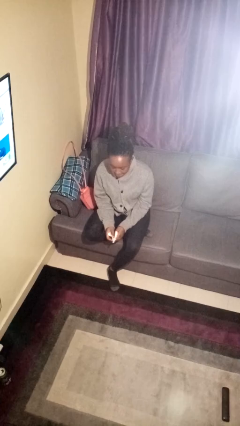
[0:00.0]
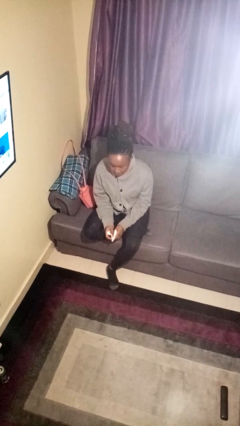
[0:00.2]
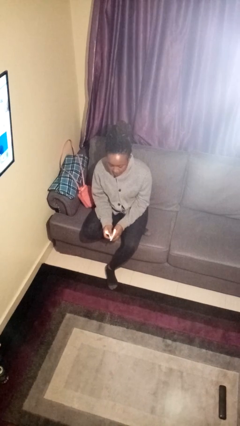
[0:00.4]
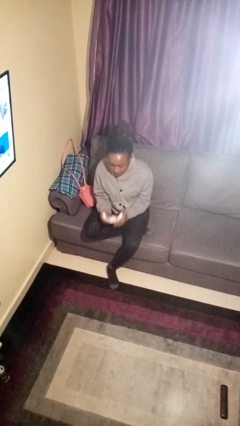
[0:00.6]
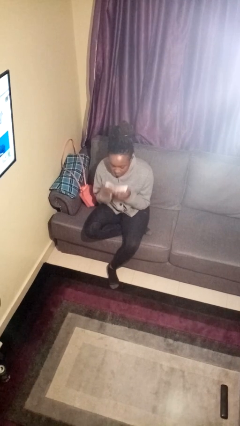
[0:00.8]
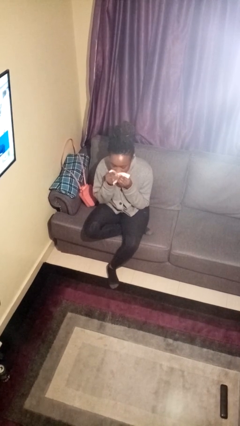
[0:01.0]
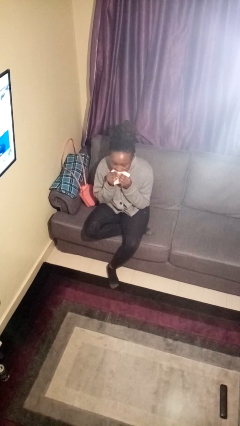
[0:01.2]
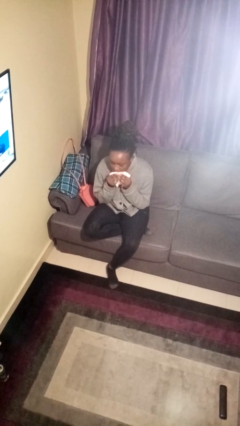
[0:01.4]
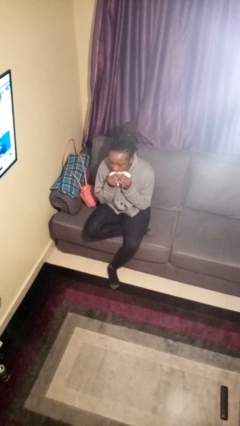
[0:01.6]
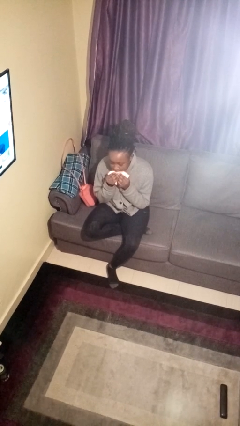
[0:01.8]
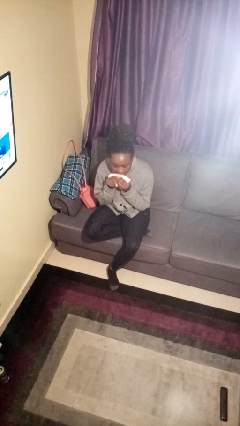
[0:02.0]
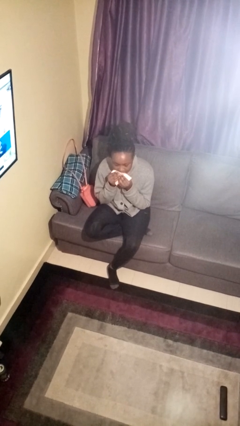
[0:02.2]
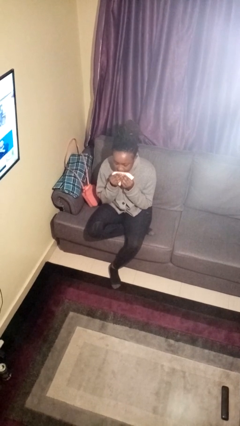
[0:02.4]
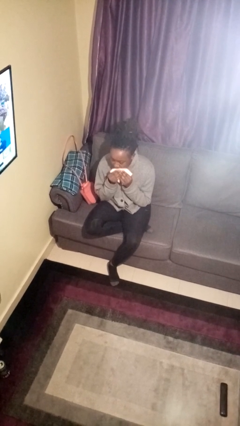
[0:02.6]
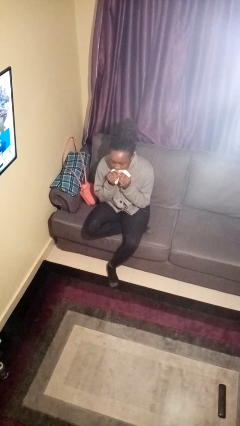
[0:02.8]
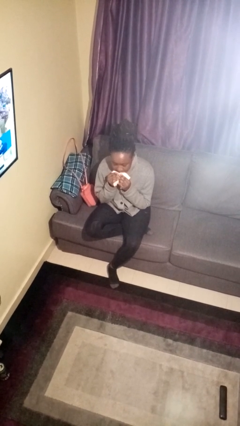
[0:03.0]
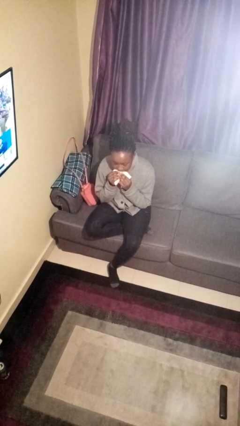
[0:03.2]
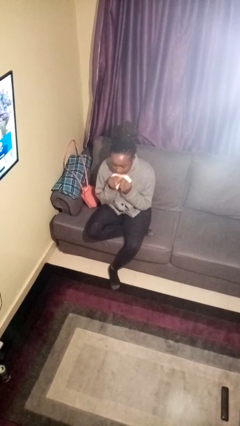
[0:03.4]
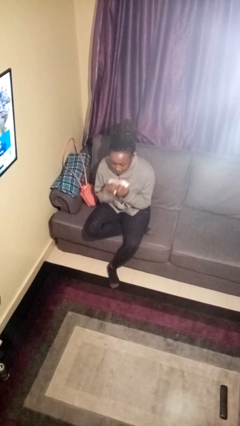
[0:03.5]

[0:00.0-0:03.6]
person wipes mouth with napkin

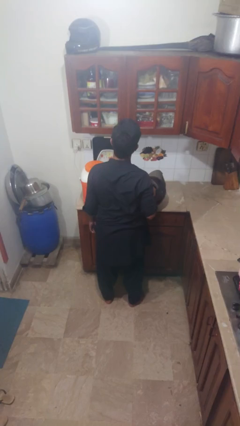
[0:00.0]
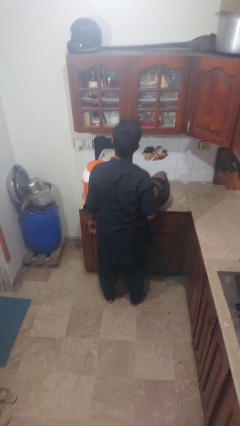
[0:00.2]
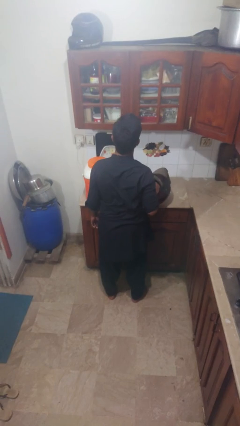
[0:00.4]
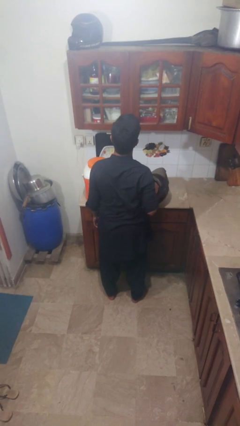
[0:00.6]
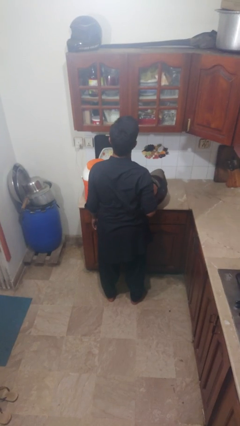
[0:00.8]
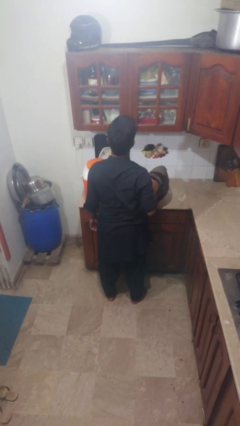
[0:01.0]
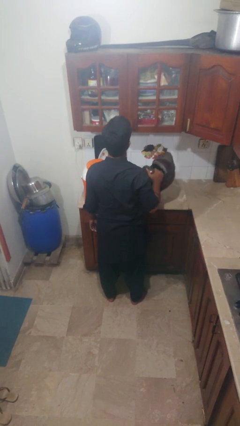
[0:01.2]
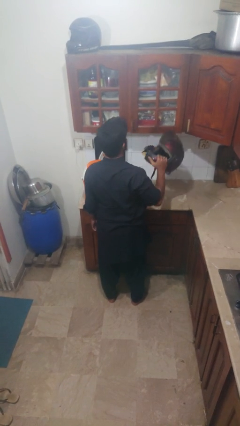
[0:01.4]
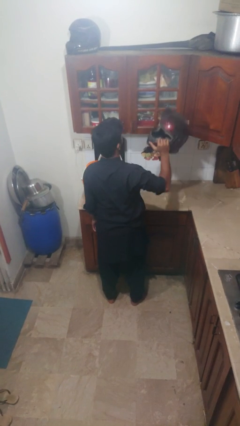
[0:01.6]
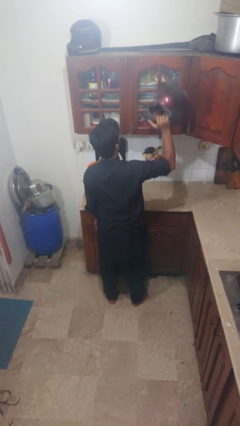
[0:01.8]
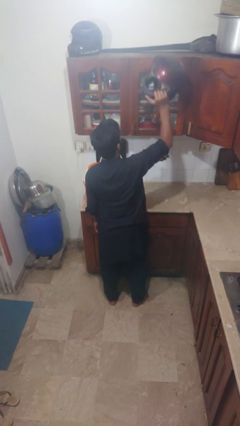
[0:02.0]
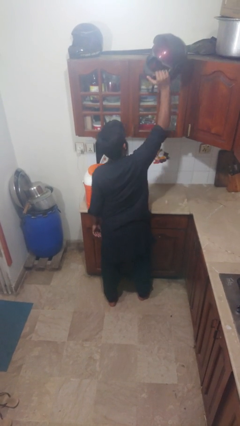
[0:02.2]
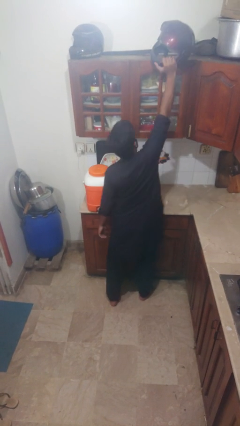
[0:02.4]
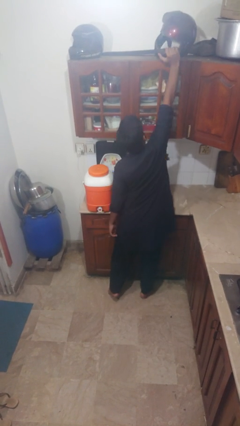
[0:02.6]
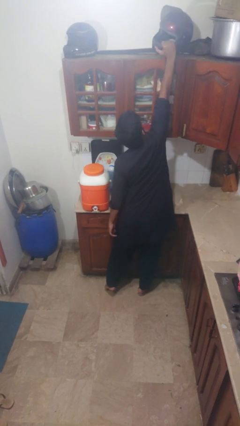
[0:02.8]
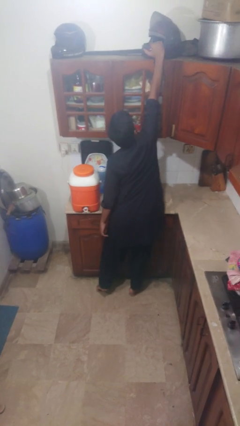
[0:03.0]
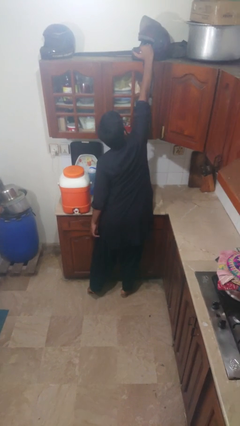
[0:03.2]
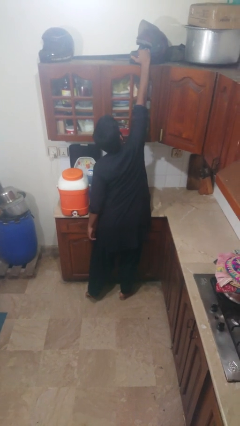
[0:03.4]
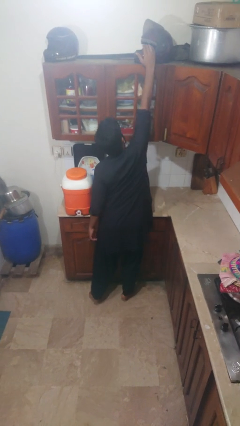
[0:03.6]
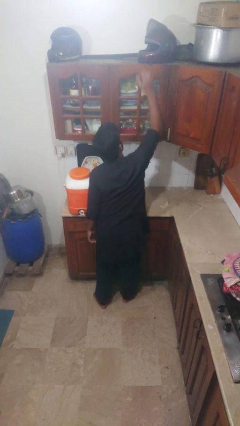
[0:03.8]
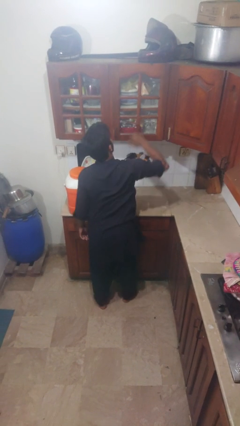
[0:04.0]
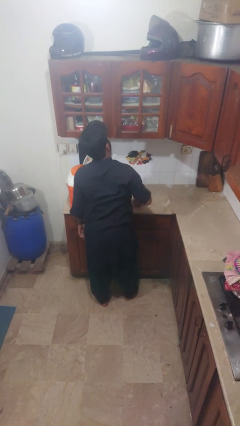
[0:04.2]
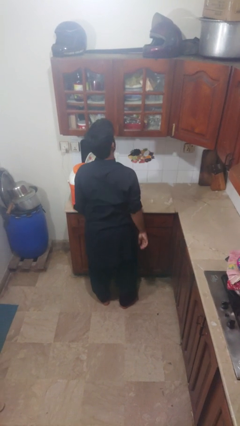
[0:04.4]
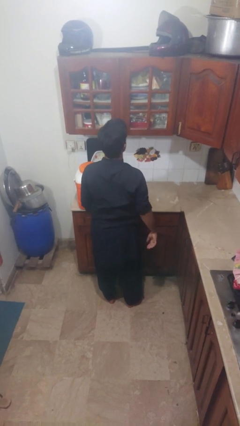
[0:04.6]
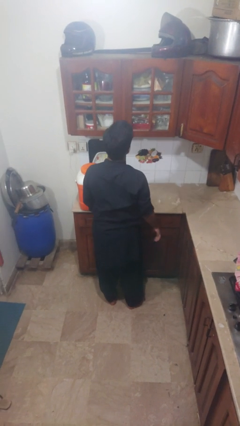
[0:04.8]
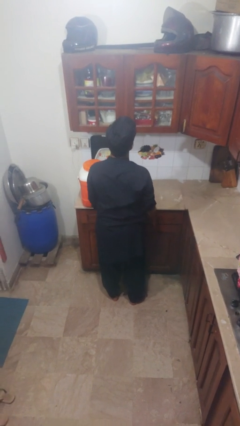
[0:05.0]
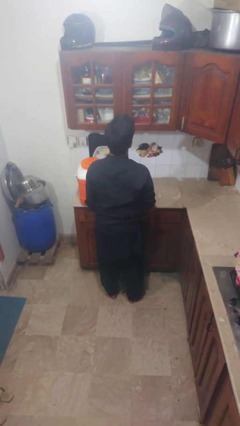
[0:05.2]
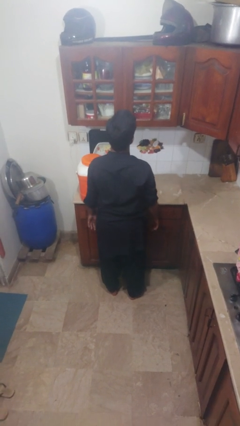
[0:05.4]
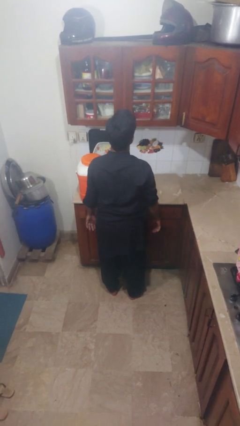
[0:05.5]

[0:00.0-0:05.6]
person puts down object on shelf

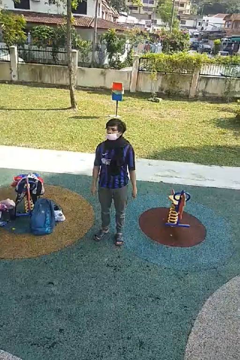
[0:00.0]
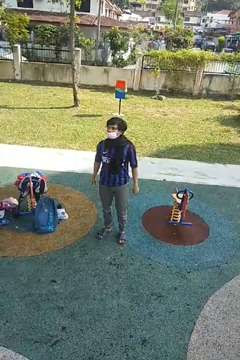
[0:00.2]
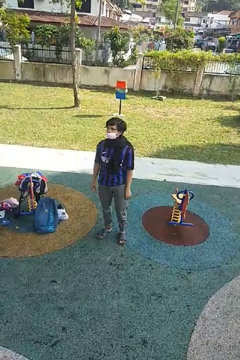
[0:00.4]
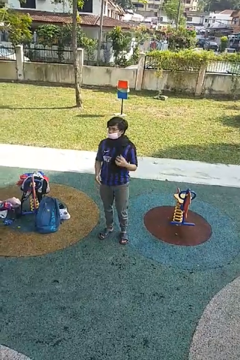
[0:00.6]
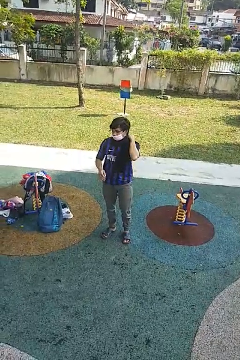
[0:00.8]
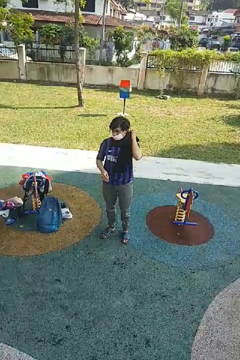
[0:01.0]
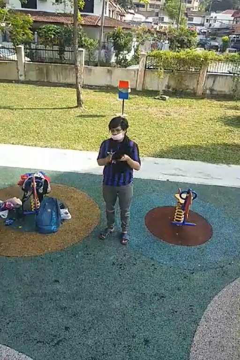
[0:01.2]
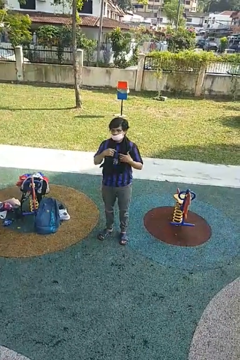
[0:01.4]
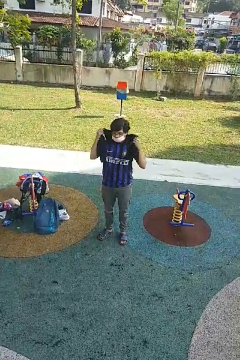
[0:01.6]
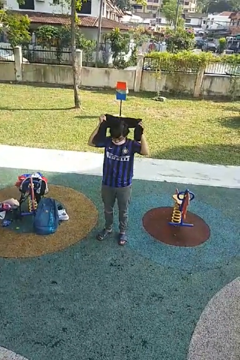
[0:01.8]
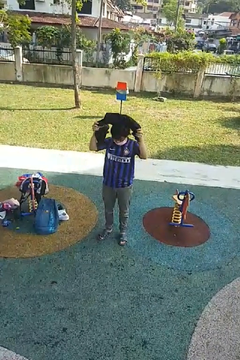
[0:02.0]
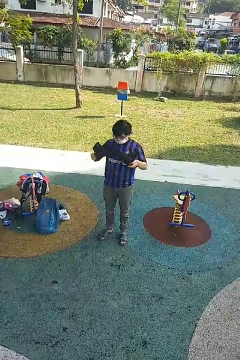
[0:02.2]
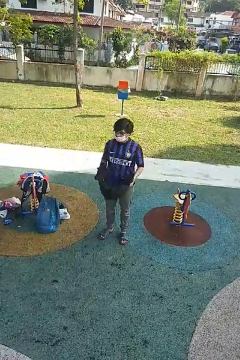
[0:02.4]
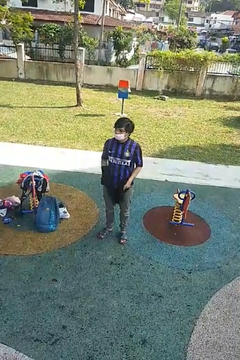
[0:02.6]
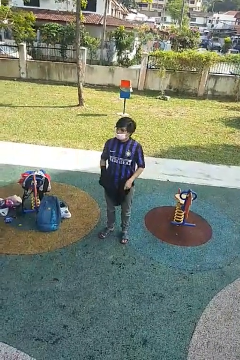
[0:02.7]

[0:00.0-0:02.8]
person takes off scarf

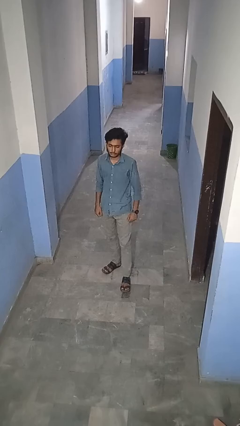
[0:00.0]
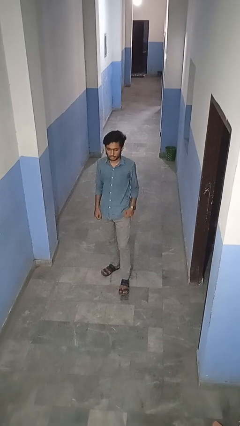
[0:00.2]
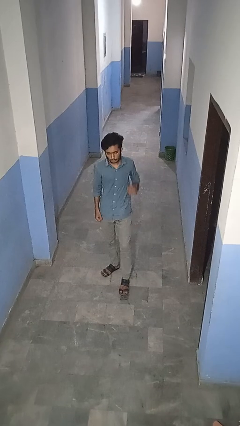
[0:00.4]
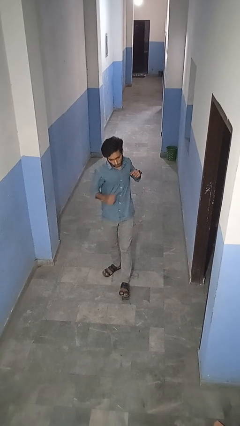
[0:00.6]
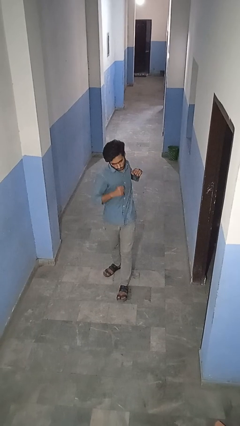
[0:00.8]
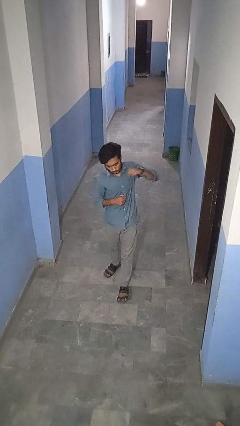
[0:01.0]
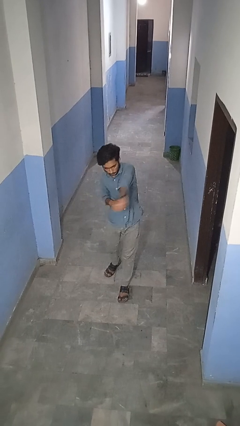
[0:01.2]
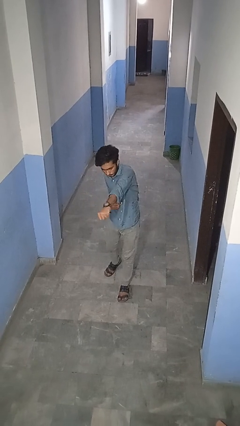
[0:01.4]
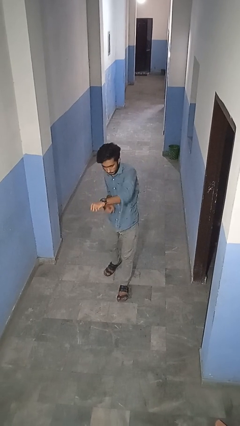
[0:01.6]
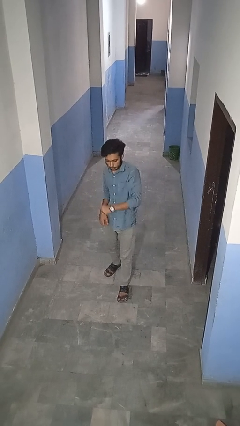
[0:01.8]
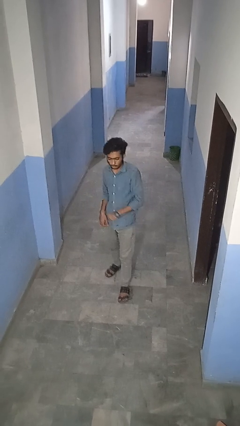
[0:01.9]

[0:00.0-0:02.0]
person punches

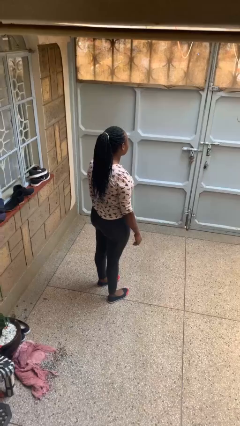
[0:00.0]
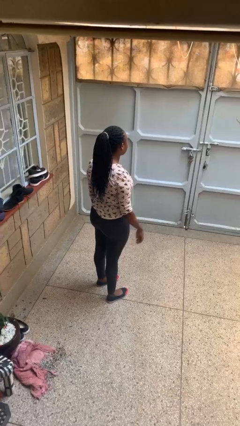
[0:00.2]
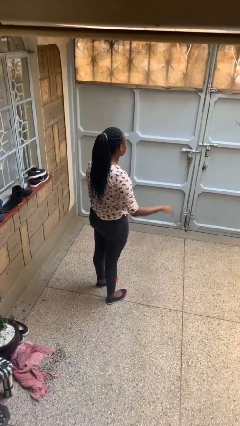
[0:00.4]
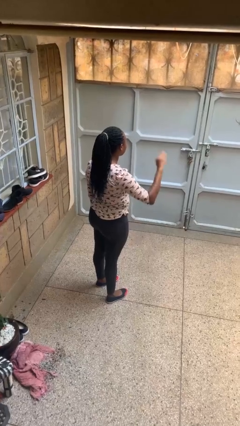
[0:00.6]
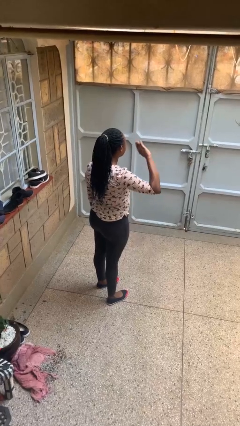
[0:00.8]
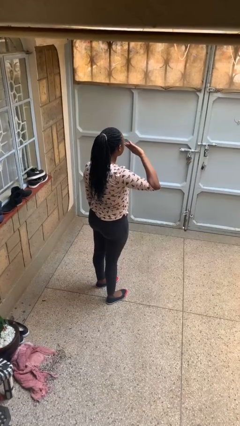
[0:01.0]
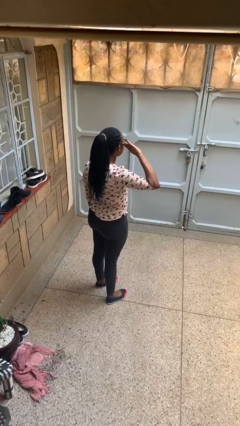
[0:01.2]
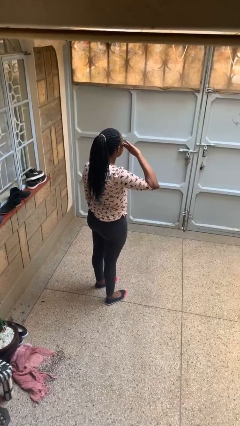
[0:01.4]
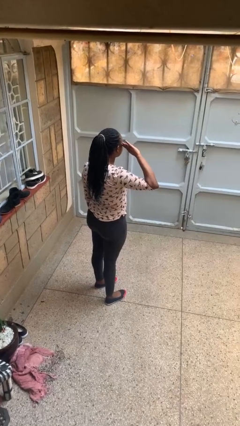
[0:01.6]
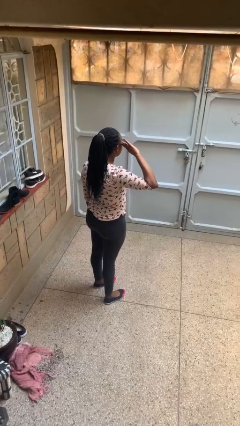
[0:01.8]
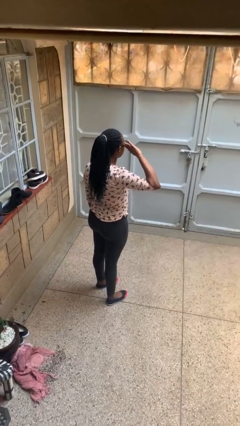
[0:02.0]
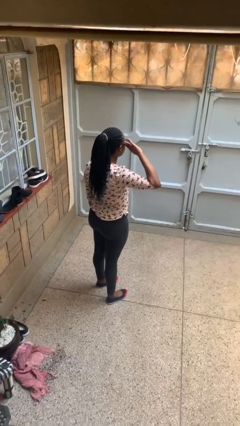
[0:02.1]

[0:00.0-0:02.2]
person salutes

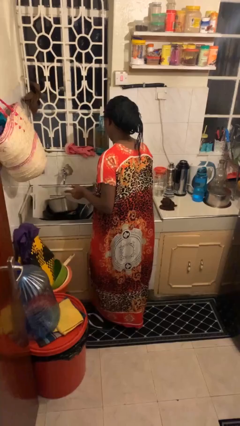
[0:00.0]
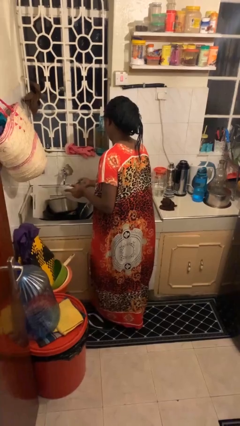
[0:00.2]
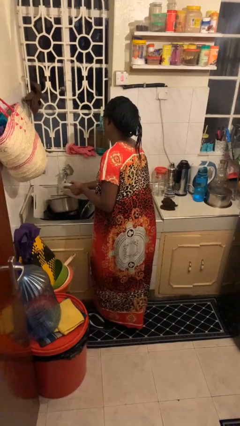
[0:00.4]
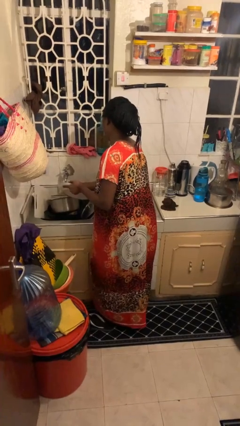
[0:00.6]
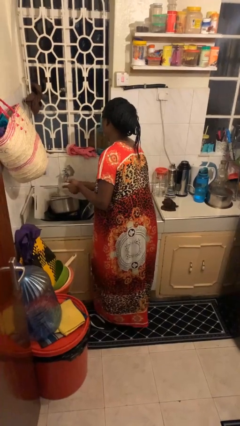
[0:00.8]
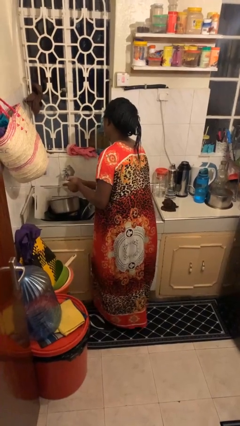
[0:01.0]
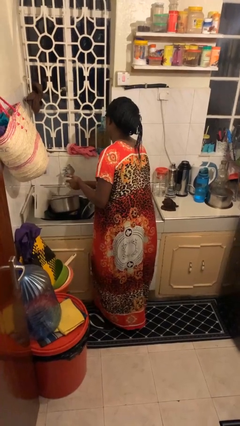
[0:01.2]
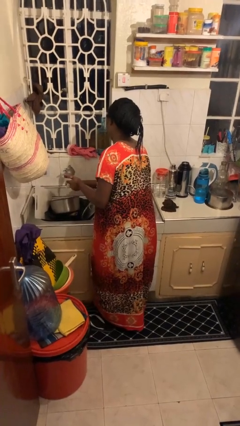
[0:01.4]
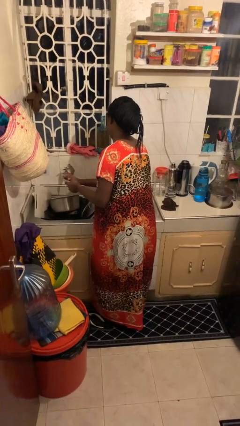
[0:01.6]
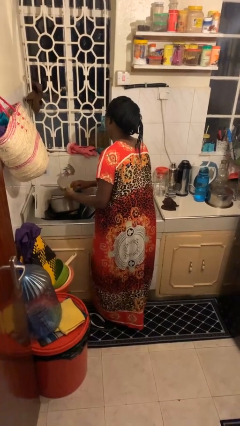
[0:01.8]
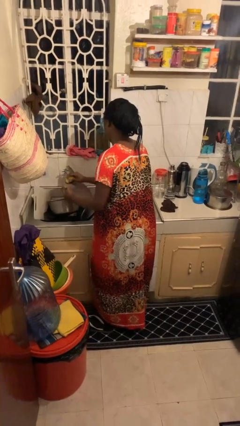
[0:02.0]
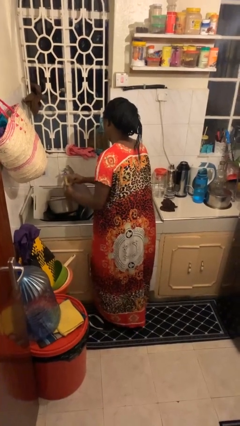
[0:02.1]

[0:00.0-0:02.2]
person washes dish
